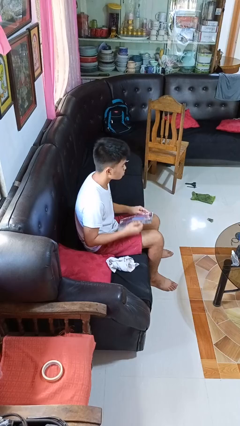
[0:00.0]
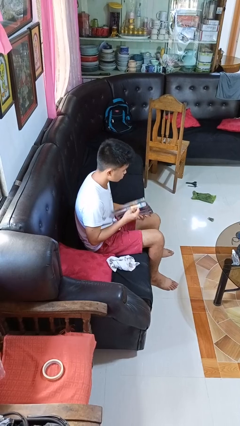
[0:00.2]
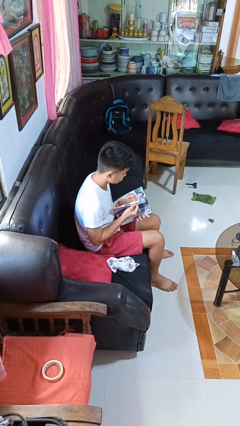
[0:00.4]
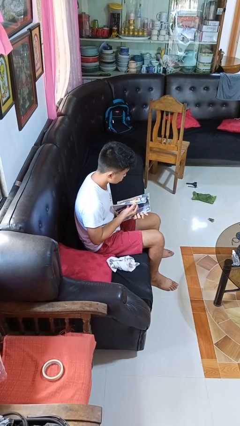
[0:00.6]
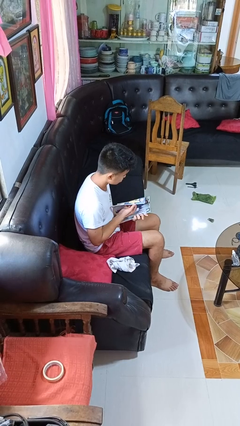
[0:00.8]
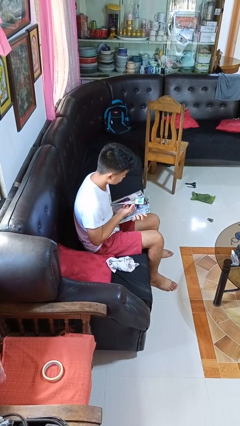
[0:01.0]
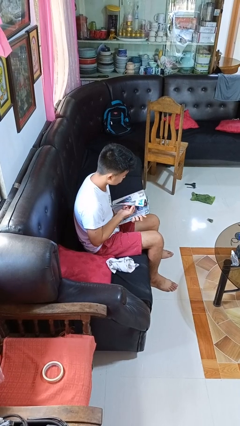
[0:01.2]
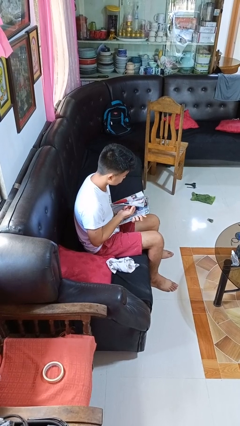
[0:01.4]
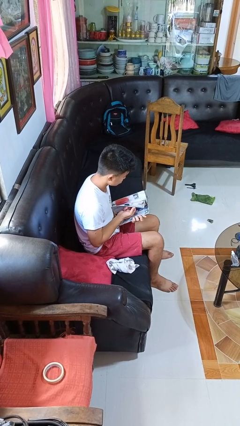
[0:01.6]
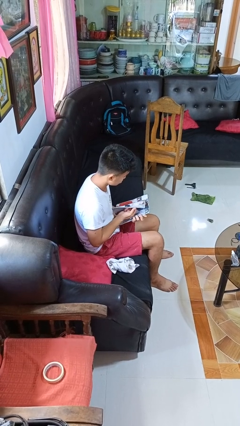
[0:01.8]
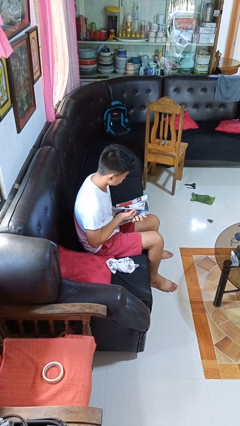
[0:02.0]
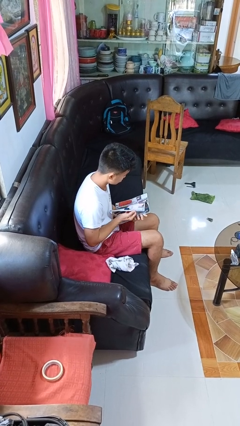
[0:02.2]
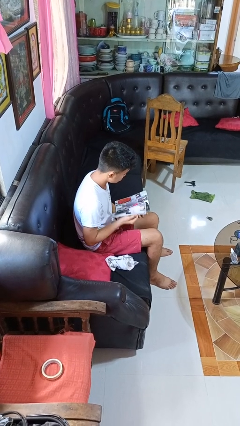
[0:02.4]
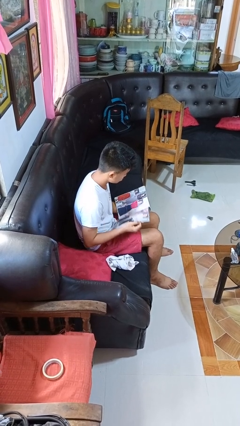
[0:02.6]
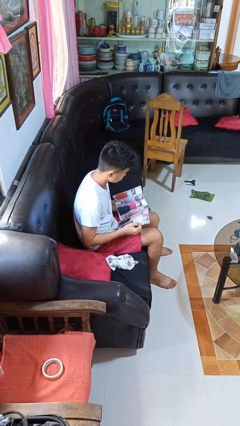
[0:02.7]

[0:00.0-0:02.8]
person reads magazine

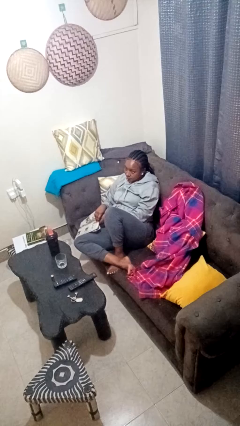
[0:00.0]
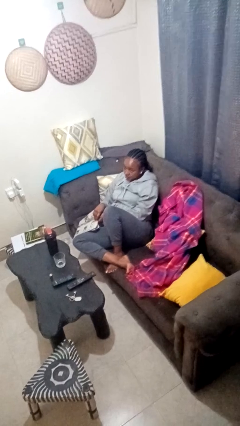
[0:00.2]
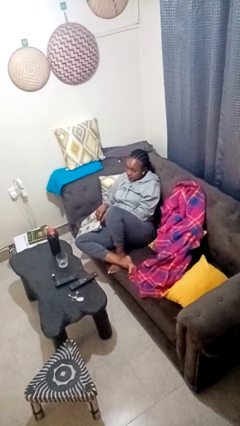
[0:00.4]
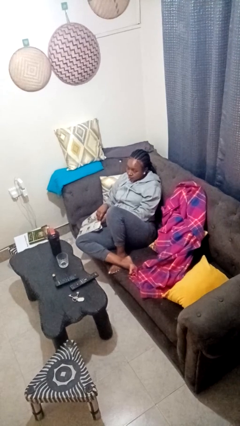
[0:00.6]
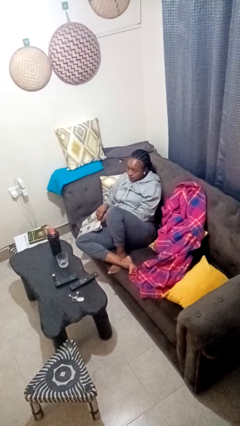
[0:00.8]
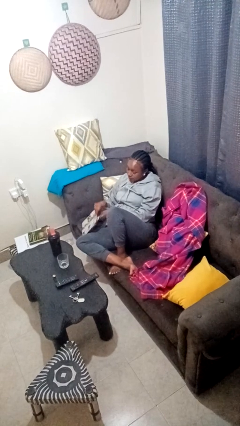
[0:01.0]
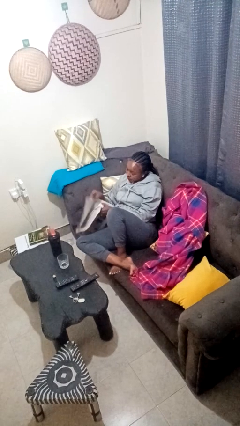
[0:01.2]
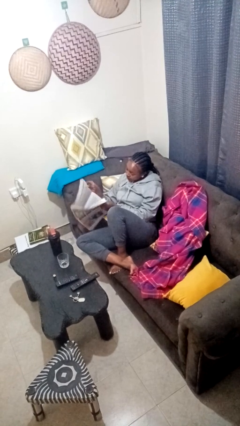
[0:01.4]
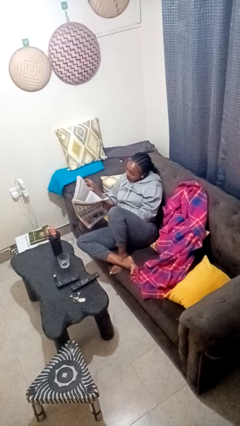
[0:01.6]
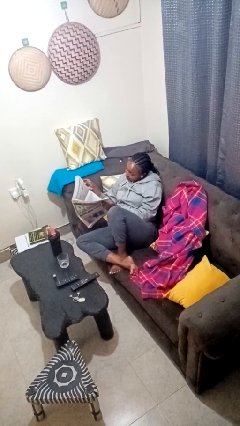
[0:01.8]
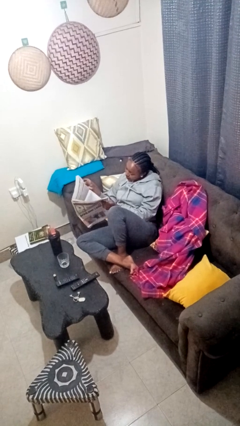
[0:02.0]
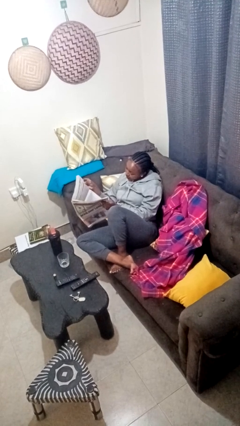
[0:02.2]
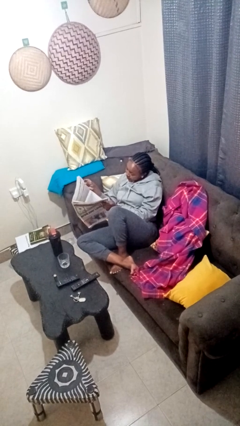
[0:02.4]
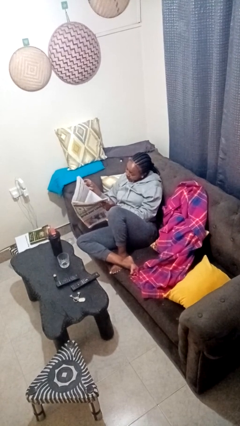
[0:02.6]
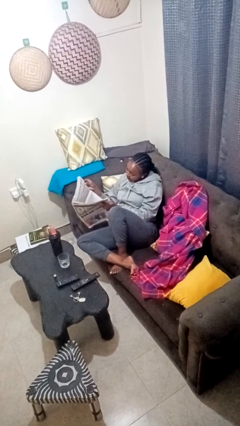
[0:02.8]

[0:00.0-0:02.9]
person reads newspaper

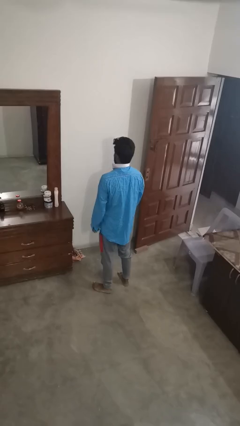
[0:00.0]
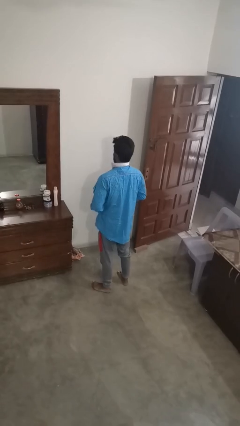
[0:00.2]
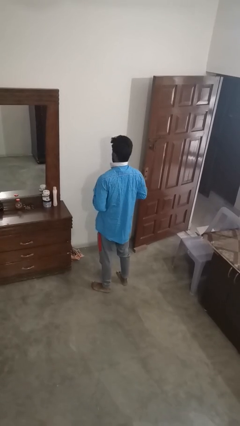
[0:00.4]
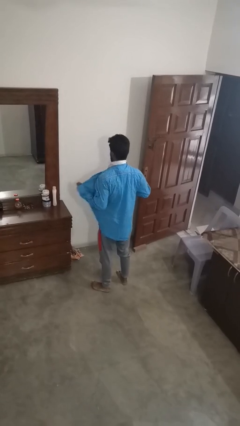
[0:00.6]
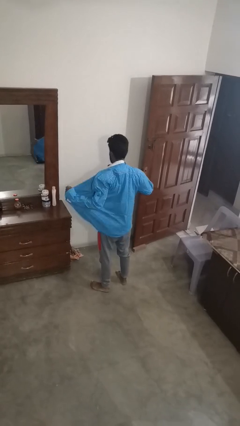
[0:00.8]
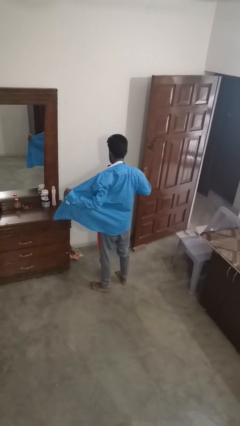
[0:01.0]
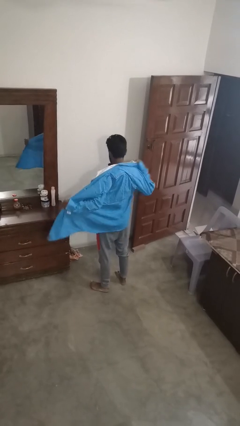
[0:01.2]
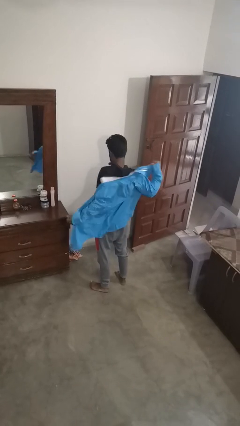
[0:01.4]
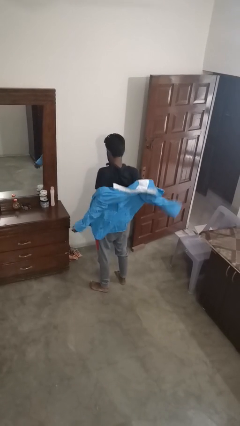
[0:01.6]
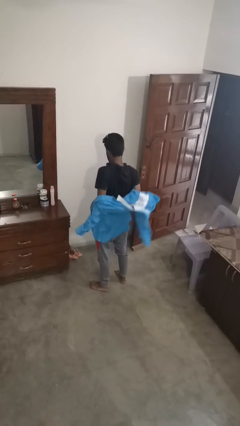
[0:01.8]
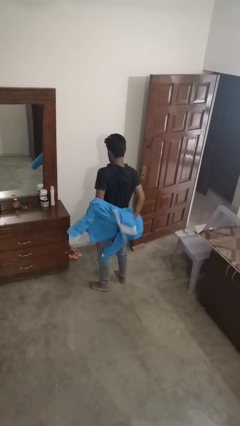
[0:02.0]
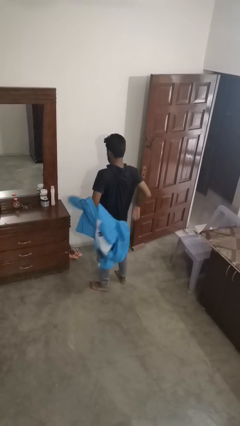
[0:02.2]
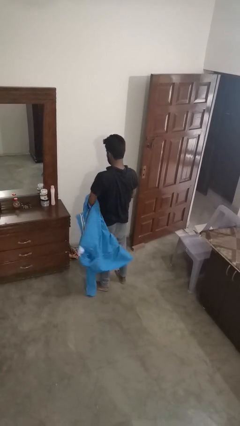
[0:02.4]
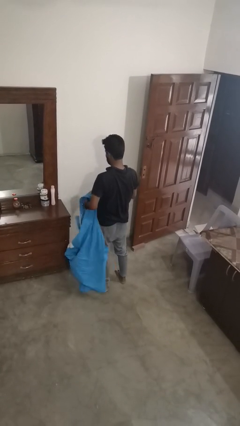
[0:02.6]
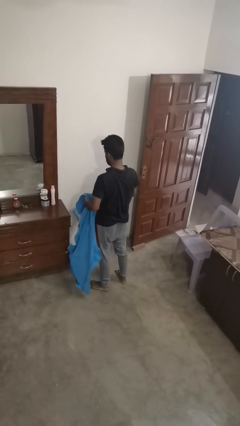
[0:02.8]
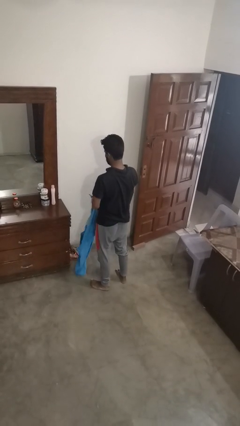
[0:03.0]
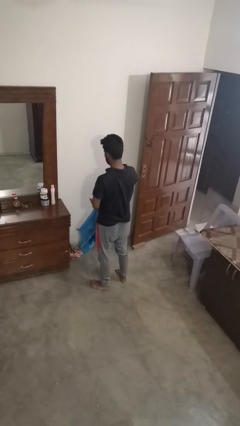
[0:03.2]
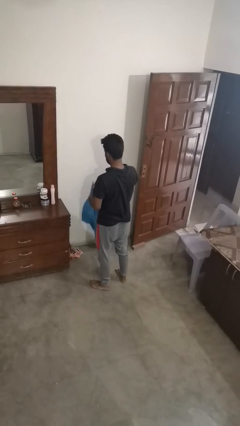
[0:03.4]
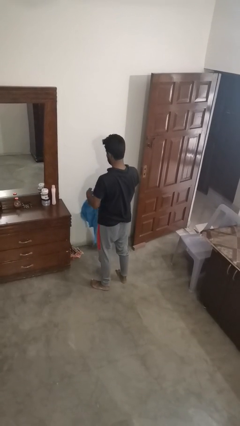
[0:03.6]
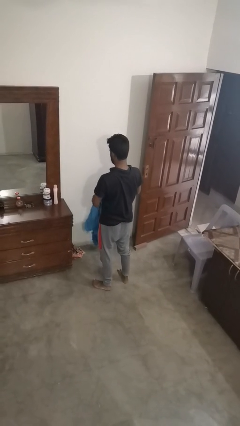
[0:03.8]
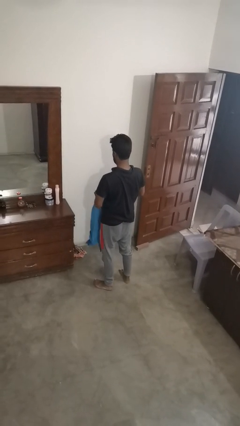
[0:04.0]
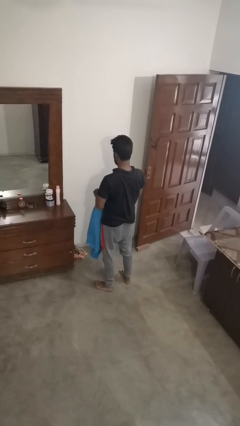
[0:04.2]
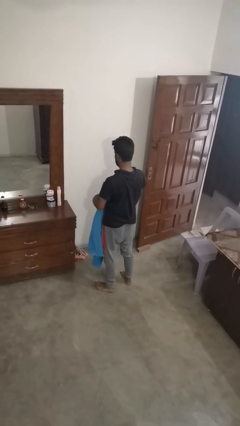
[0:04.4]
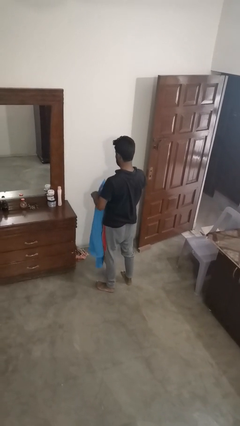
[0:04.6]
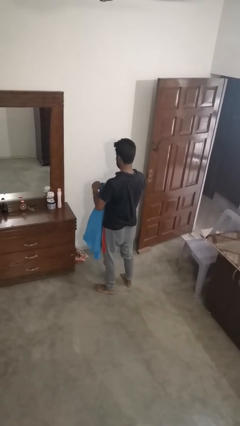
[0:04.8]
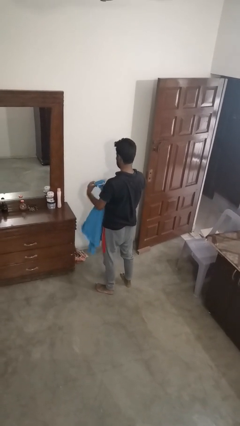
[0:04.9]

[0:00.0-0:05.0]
person takes off shirt

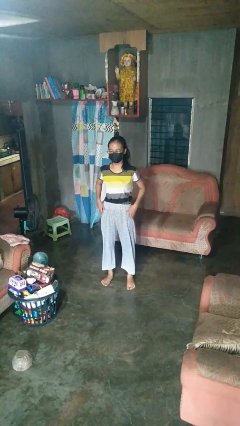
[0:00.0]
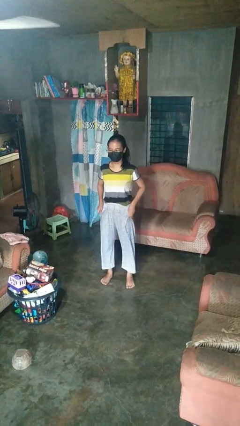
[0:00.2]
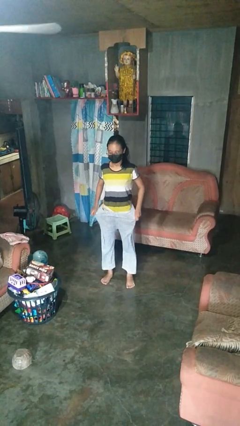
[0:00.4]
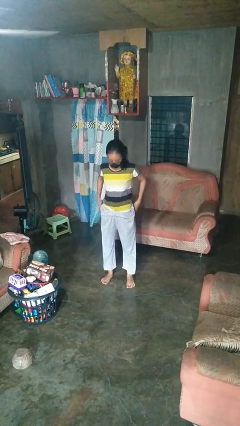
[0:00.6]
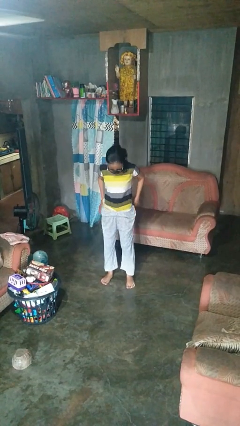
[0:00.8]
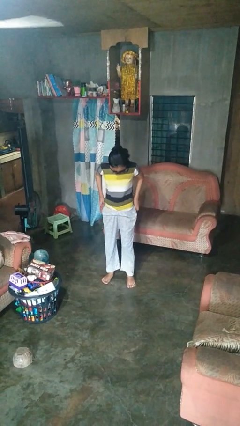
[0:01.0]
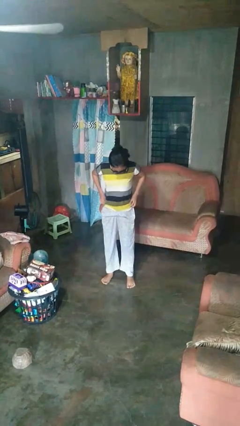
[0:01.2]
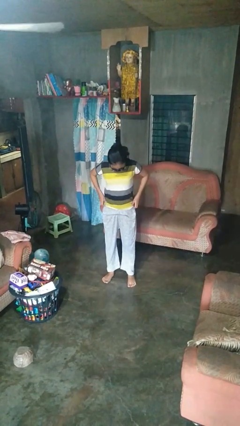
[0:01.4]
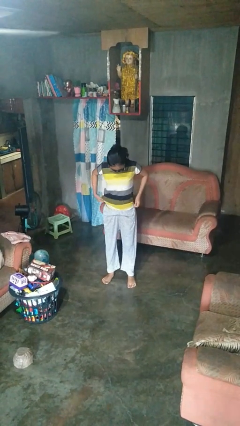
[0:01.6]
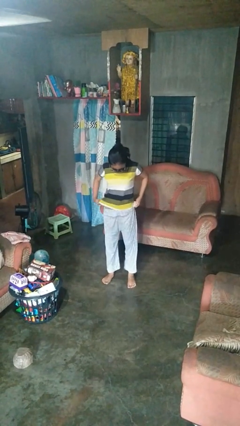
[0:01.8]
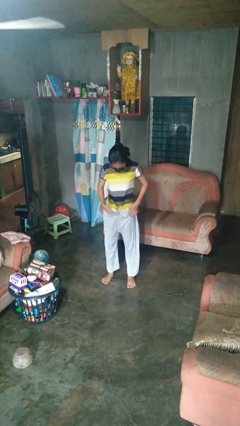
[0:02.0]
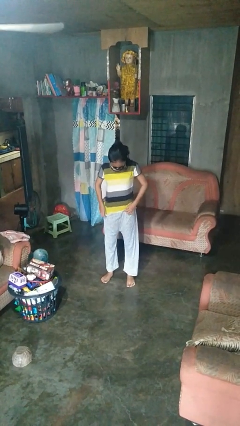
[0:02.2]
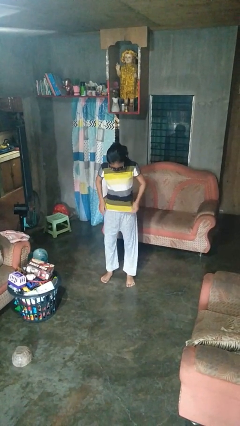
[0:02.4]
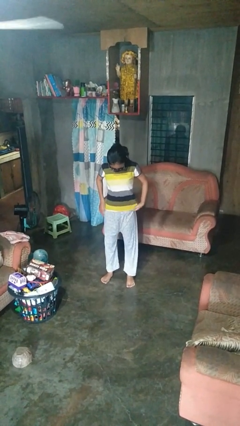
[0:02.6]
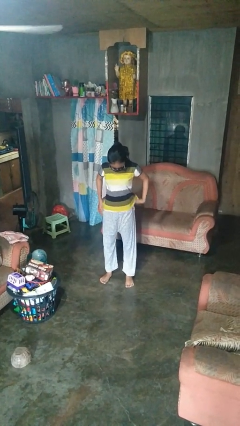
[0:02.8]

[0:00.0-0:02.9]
person untucks shirt

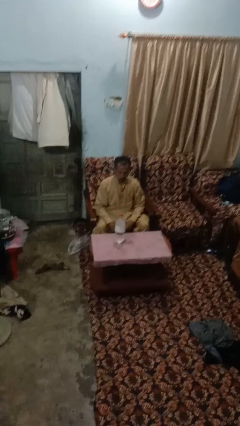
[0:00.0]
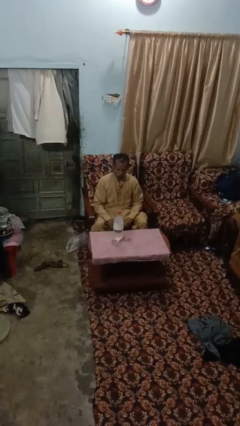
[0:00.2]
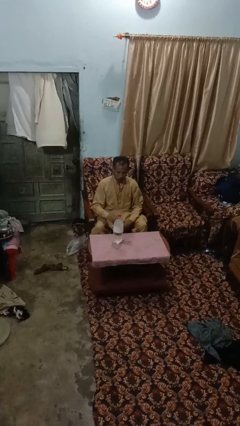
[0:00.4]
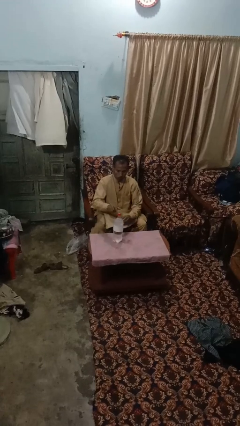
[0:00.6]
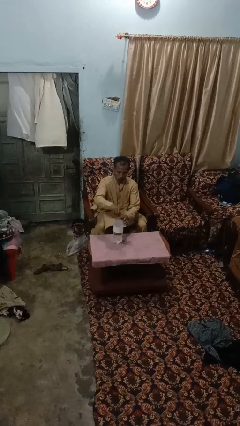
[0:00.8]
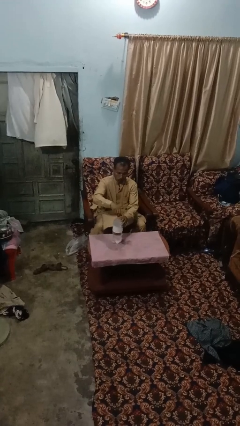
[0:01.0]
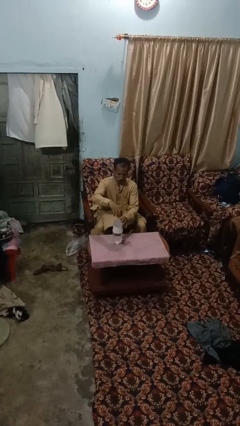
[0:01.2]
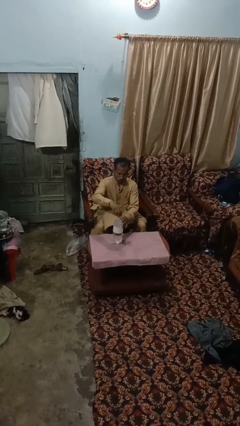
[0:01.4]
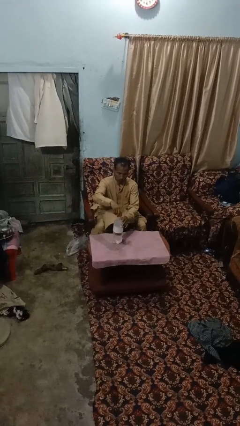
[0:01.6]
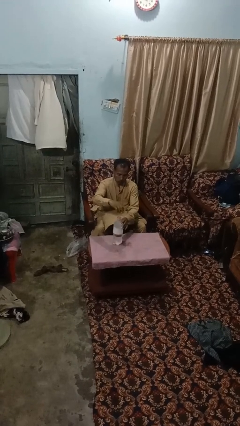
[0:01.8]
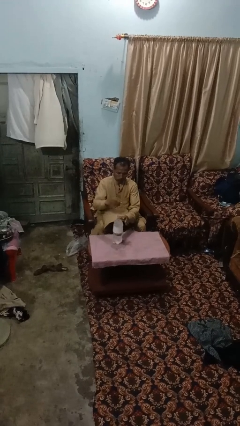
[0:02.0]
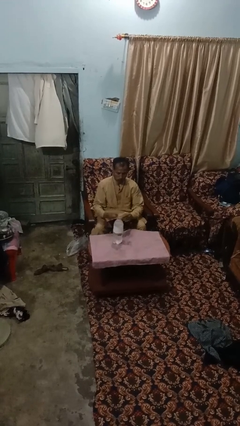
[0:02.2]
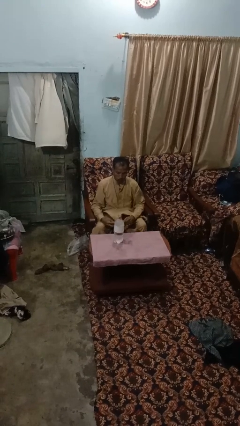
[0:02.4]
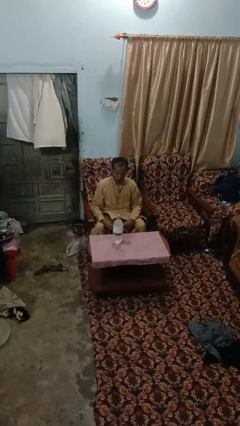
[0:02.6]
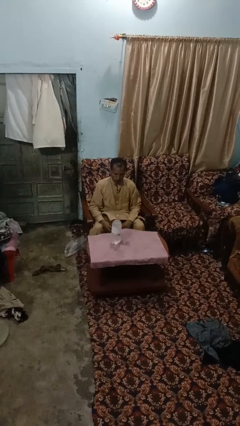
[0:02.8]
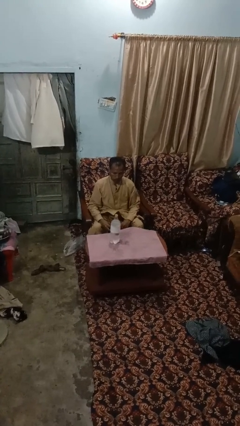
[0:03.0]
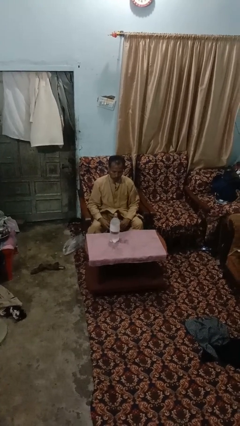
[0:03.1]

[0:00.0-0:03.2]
person unscrews lid from bottle

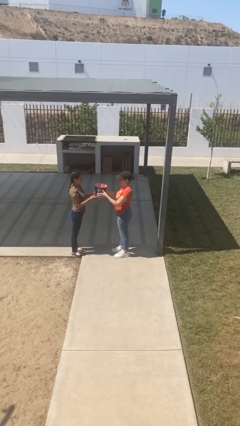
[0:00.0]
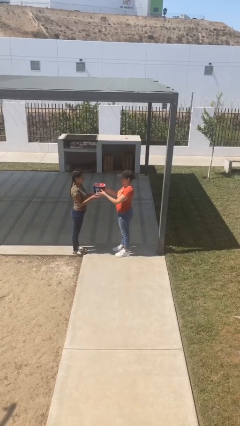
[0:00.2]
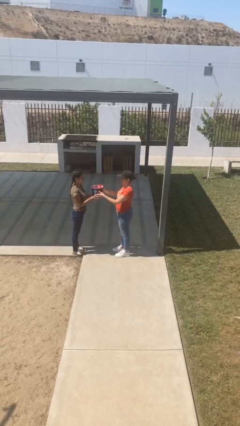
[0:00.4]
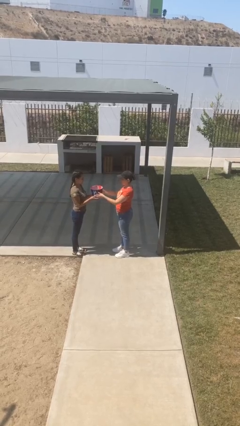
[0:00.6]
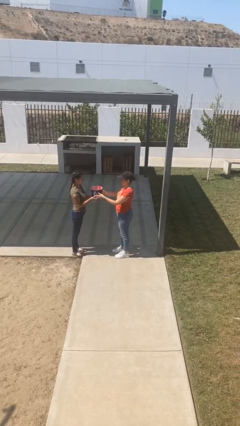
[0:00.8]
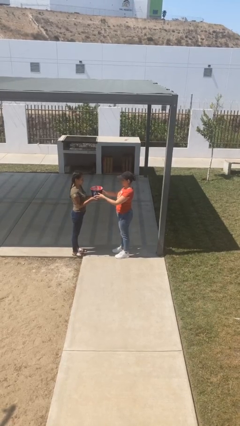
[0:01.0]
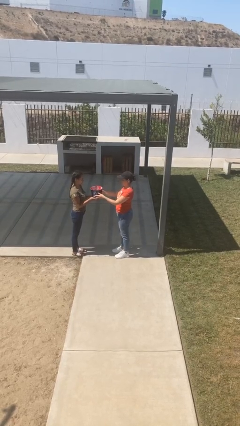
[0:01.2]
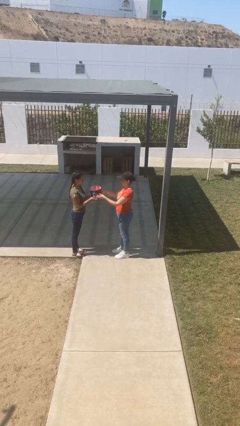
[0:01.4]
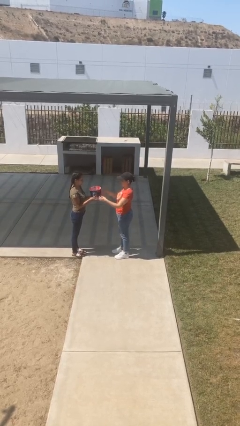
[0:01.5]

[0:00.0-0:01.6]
person transfers object to person
